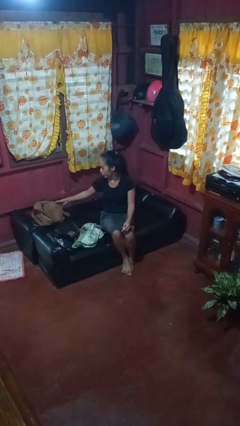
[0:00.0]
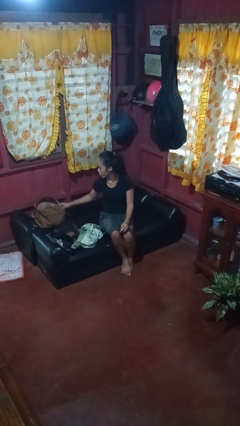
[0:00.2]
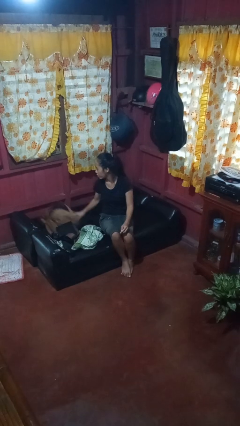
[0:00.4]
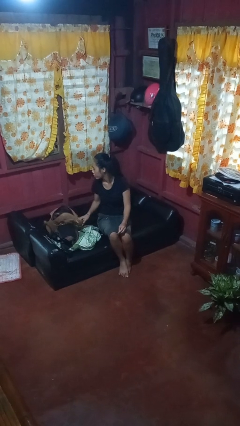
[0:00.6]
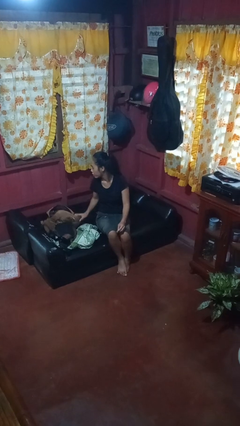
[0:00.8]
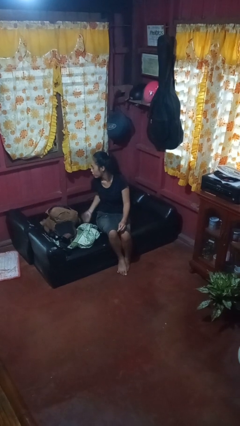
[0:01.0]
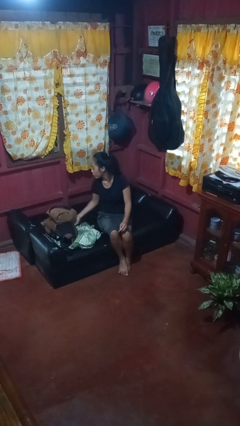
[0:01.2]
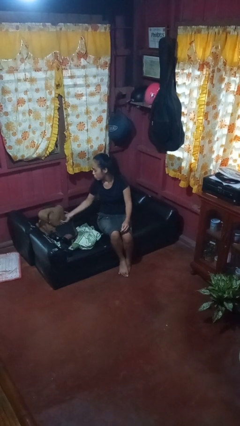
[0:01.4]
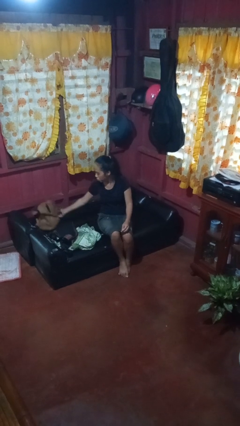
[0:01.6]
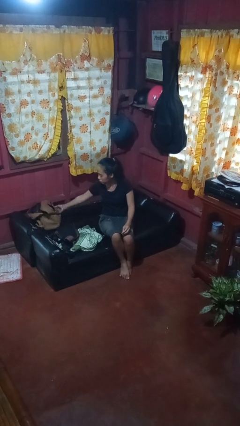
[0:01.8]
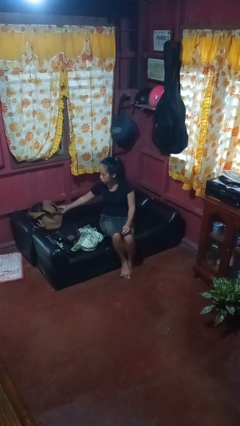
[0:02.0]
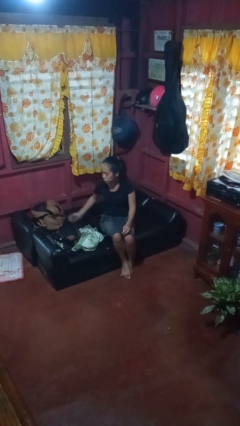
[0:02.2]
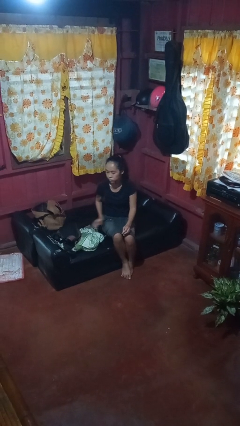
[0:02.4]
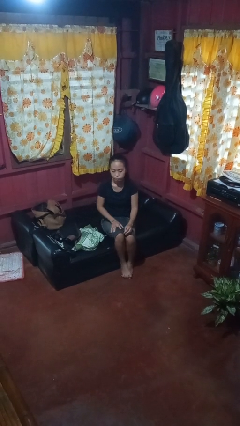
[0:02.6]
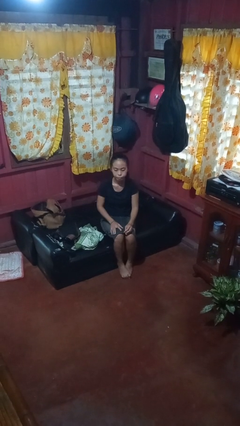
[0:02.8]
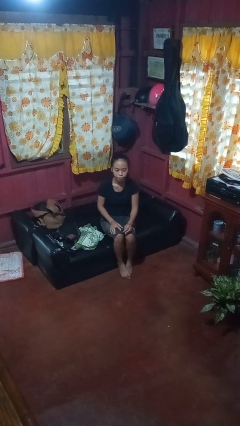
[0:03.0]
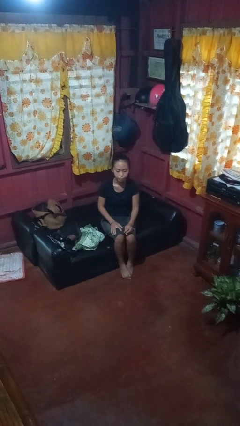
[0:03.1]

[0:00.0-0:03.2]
person searches in couch

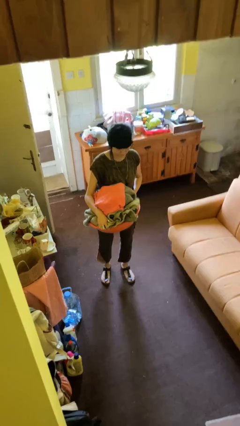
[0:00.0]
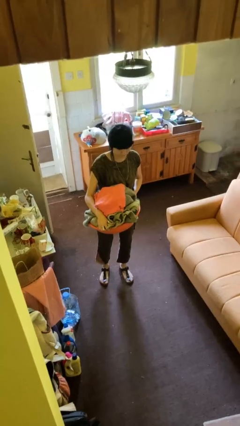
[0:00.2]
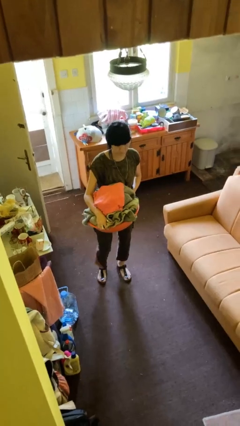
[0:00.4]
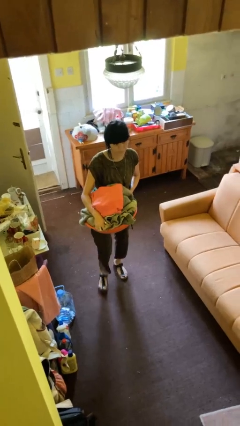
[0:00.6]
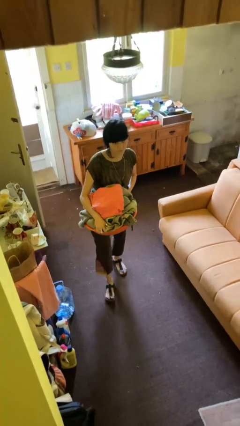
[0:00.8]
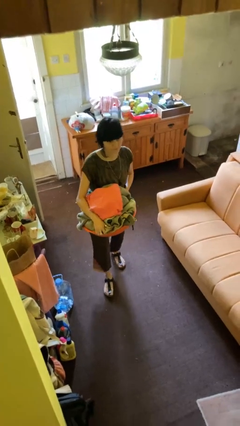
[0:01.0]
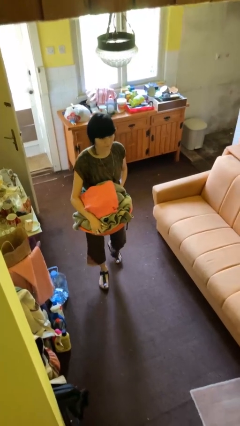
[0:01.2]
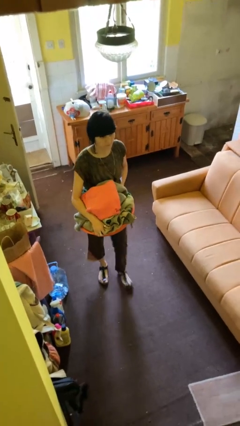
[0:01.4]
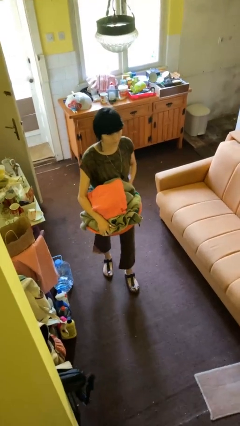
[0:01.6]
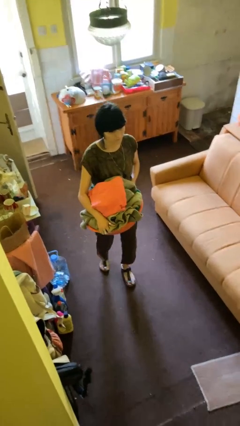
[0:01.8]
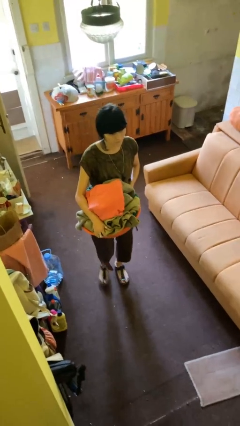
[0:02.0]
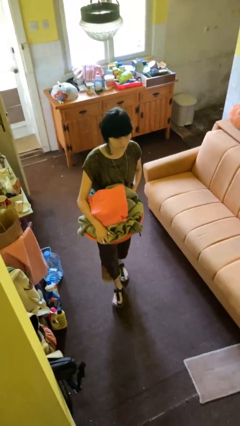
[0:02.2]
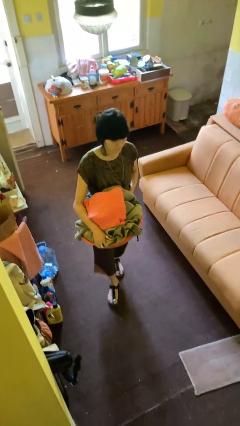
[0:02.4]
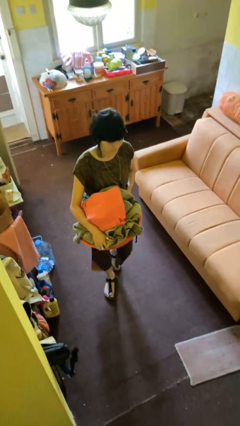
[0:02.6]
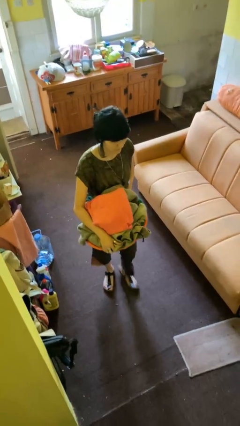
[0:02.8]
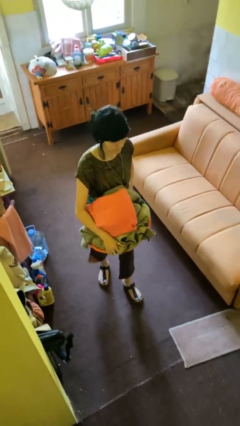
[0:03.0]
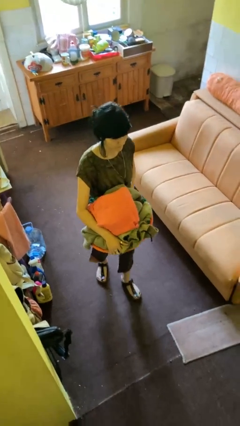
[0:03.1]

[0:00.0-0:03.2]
person carries laundry basket

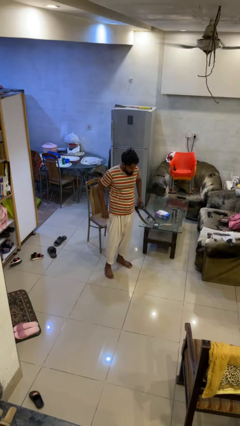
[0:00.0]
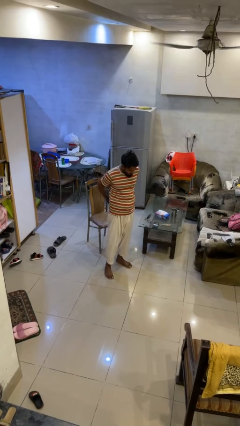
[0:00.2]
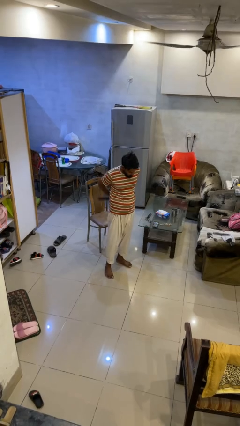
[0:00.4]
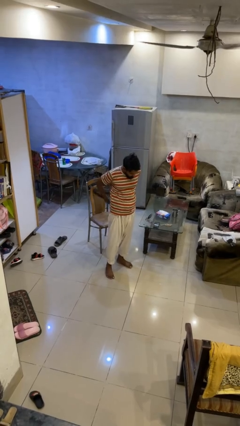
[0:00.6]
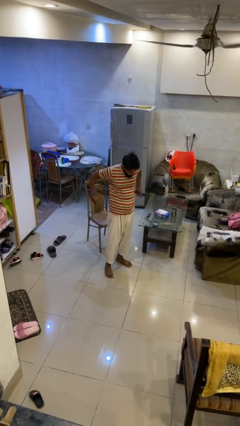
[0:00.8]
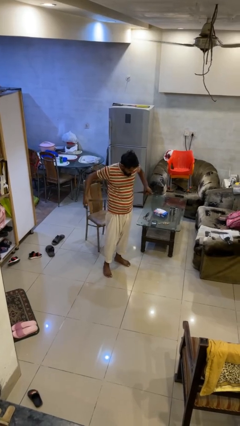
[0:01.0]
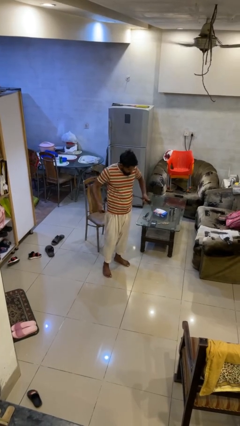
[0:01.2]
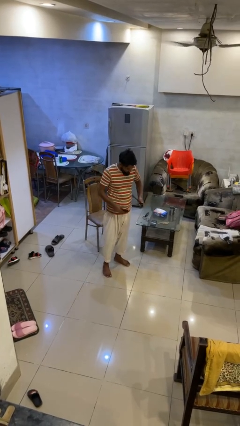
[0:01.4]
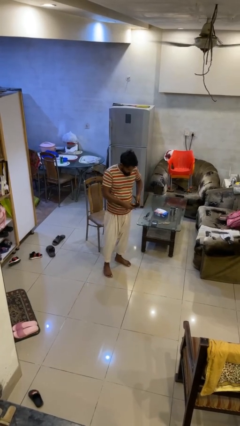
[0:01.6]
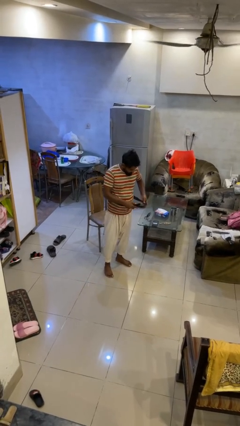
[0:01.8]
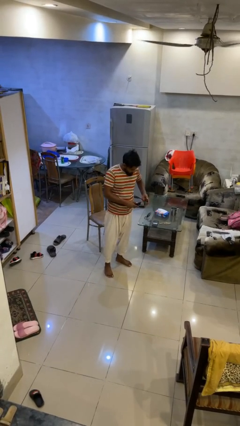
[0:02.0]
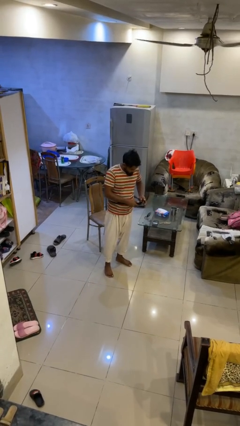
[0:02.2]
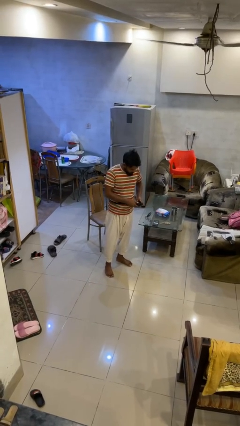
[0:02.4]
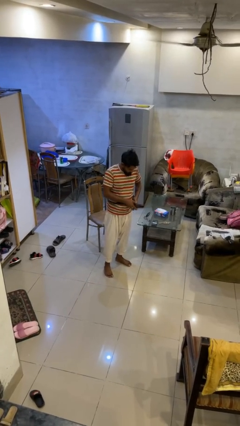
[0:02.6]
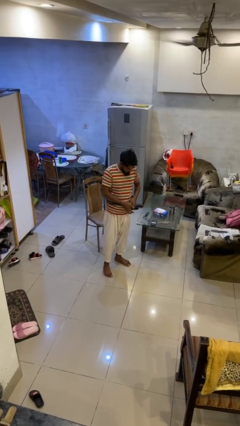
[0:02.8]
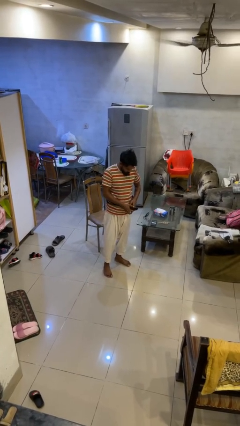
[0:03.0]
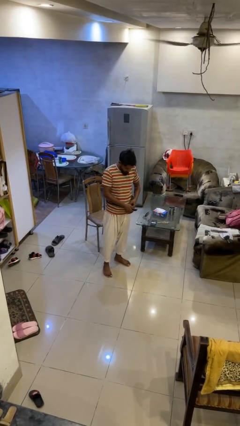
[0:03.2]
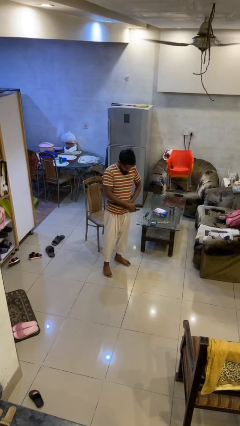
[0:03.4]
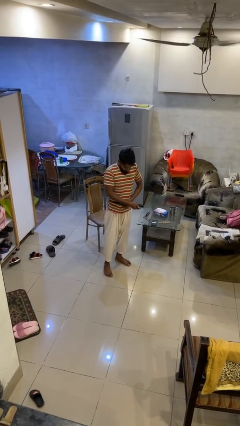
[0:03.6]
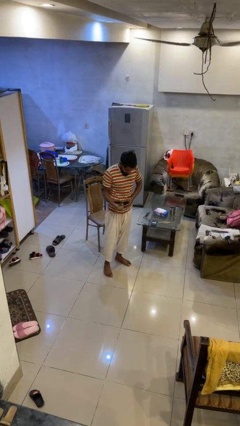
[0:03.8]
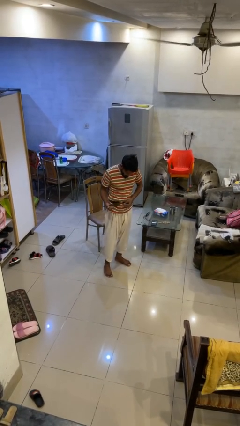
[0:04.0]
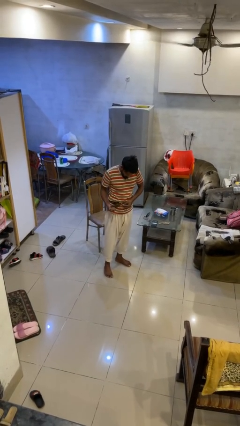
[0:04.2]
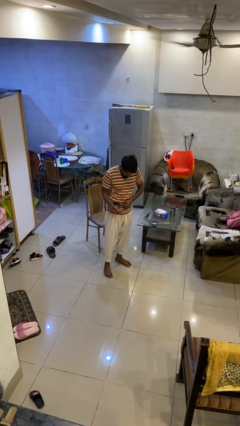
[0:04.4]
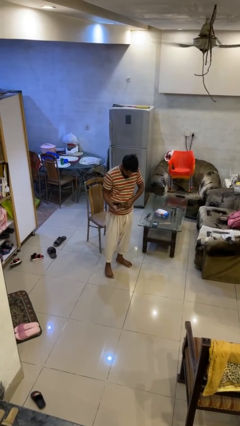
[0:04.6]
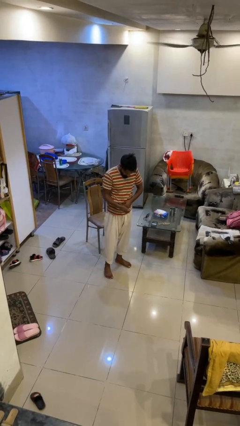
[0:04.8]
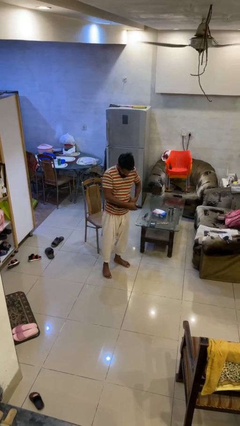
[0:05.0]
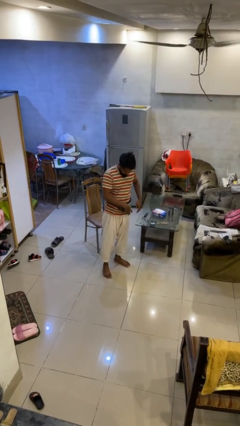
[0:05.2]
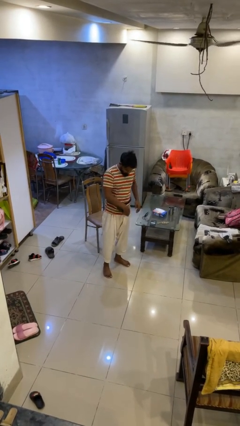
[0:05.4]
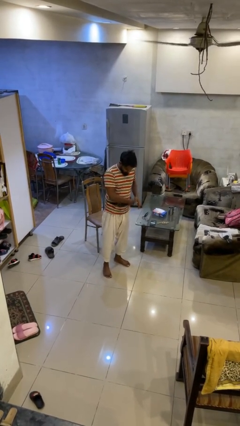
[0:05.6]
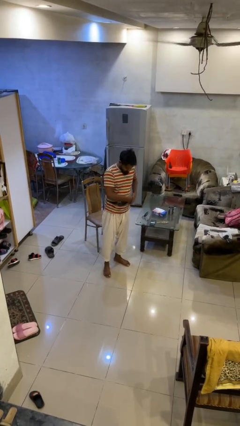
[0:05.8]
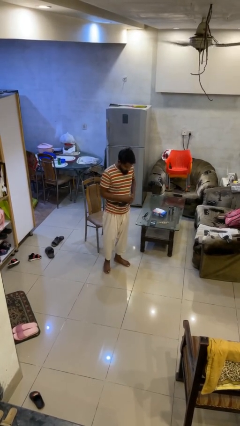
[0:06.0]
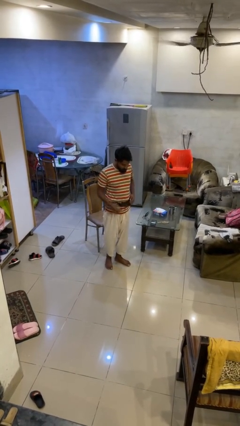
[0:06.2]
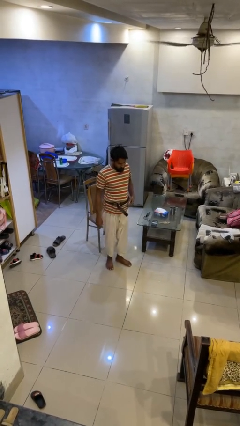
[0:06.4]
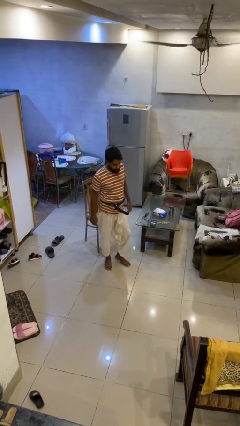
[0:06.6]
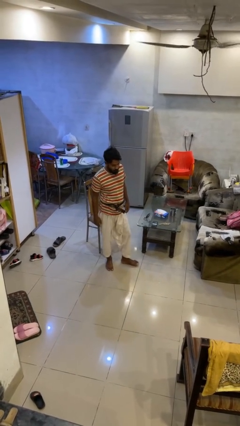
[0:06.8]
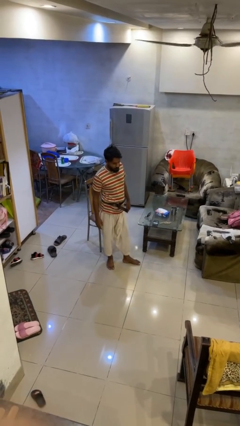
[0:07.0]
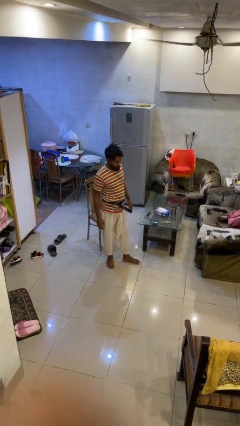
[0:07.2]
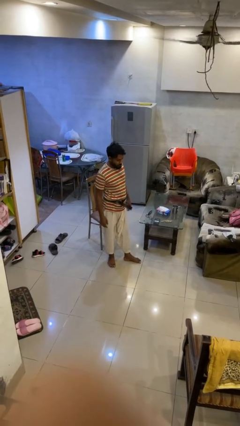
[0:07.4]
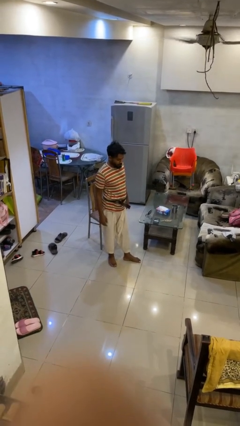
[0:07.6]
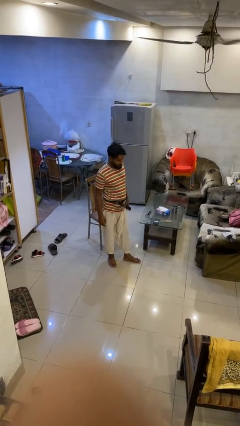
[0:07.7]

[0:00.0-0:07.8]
person puts on belt

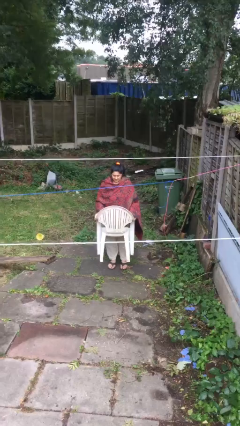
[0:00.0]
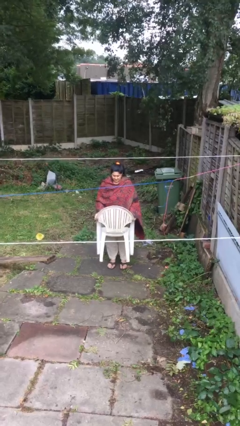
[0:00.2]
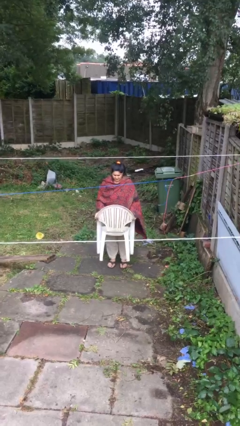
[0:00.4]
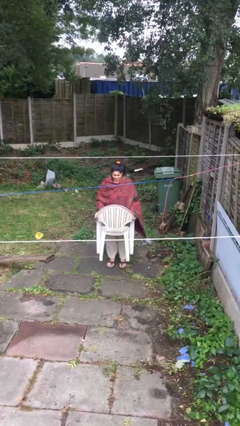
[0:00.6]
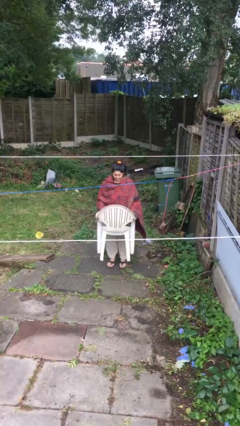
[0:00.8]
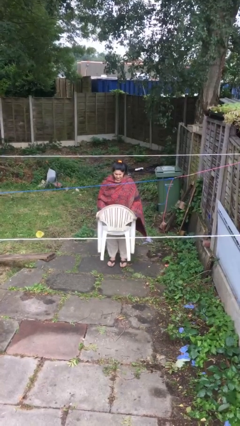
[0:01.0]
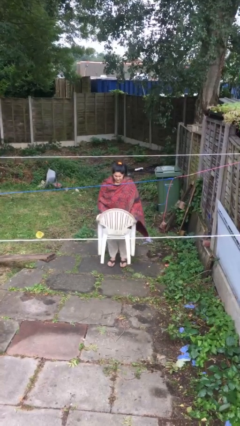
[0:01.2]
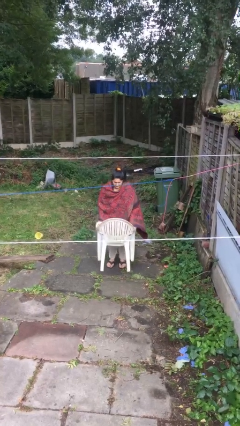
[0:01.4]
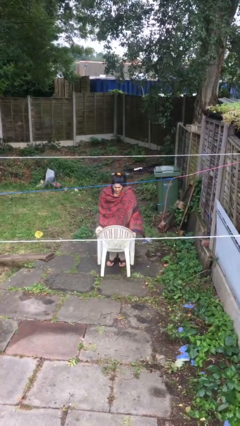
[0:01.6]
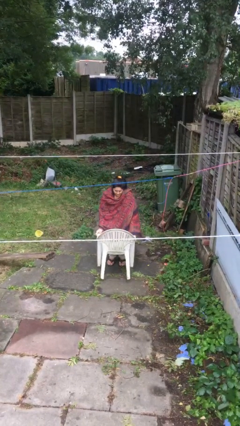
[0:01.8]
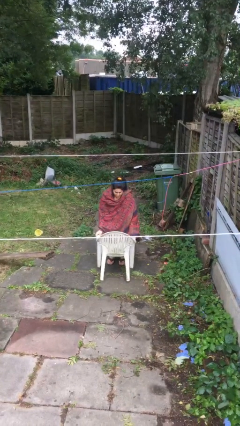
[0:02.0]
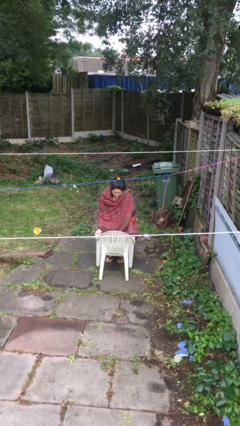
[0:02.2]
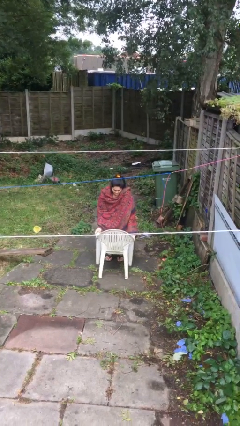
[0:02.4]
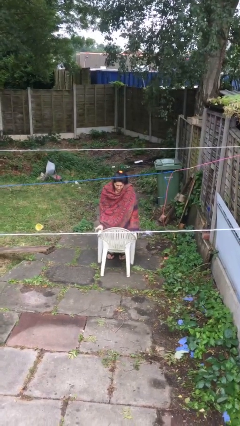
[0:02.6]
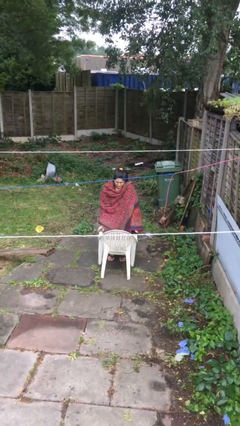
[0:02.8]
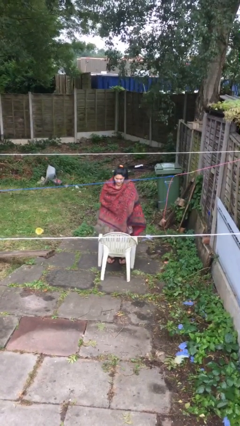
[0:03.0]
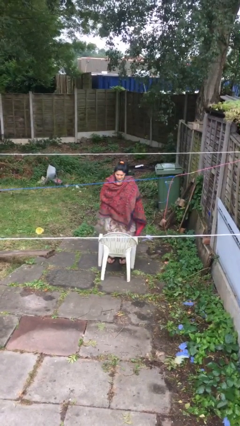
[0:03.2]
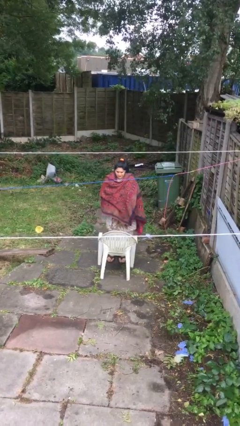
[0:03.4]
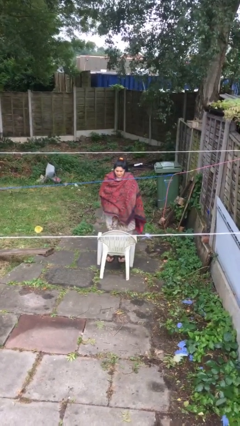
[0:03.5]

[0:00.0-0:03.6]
person puts down object on floor
